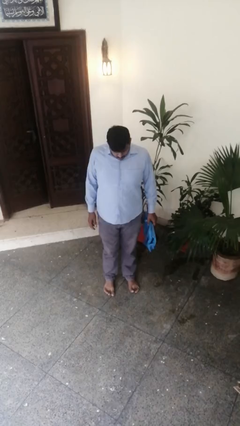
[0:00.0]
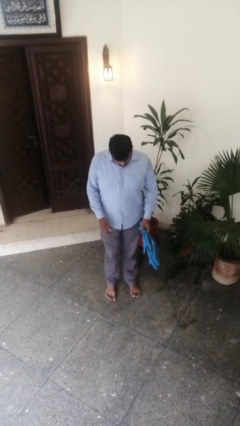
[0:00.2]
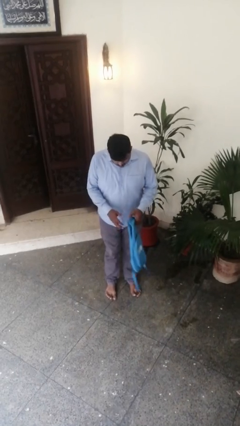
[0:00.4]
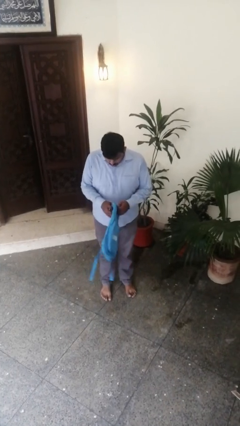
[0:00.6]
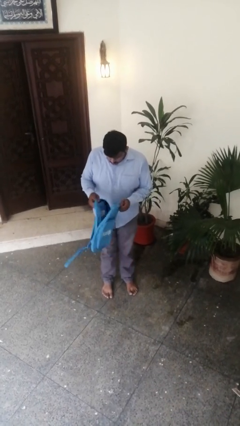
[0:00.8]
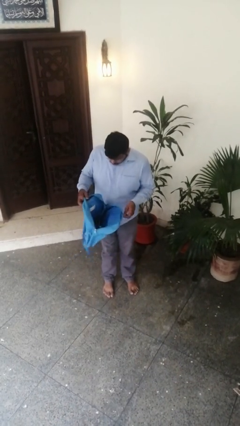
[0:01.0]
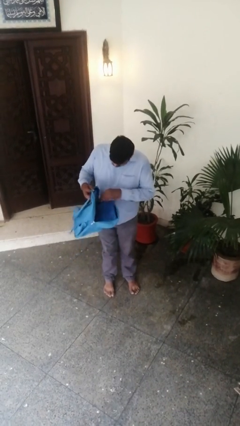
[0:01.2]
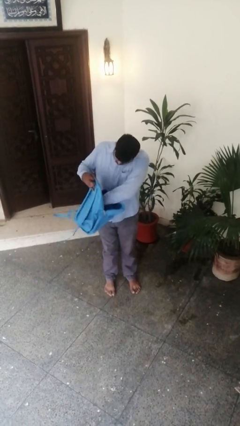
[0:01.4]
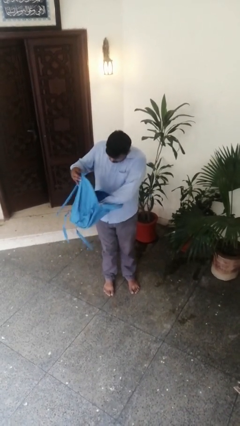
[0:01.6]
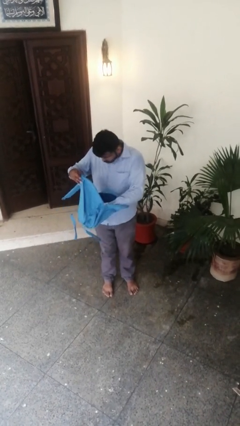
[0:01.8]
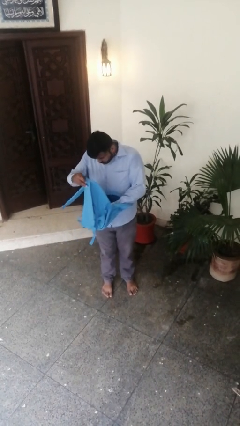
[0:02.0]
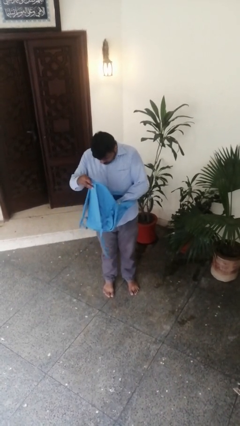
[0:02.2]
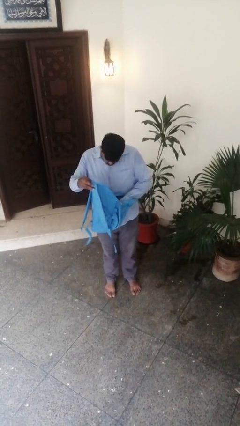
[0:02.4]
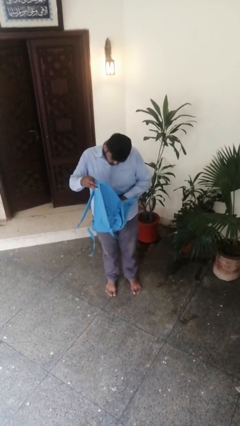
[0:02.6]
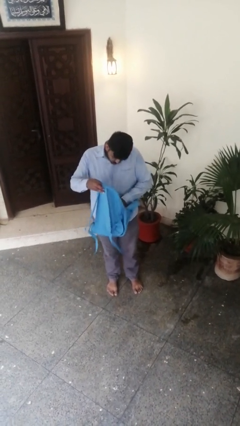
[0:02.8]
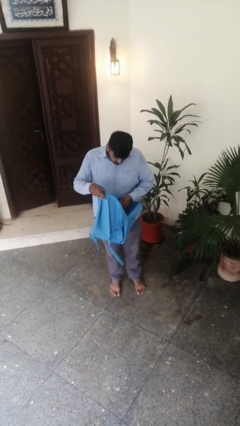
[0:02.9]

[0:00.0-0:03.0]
person searches in backpack

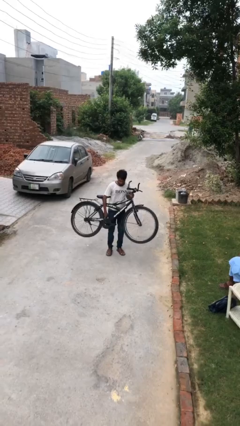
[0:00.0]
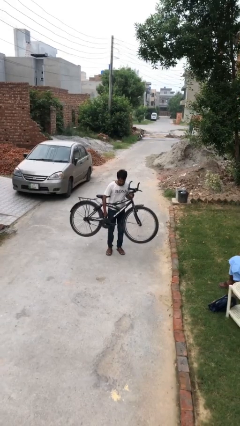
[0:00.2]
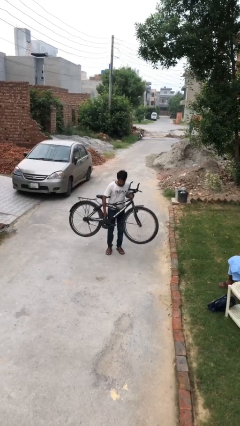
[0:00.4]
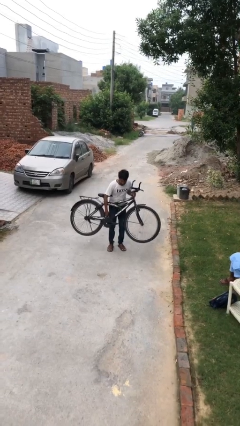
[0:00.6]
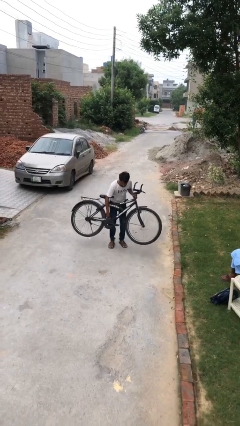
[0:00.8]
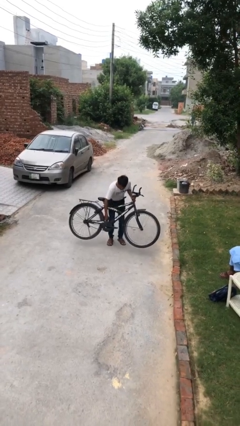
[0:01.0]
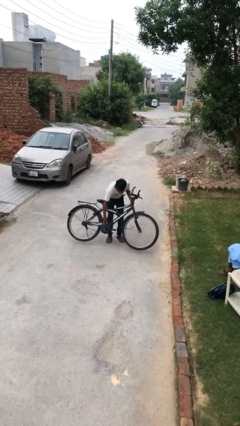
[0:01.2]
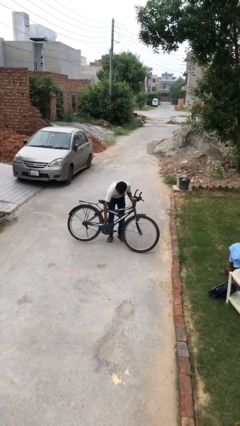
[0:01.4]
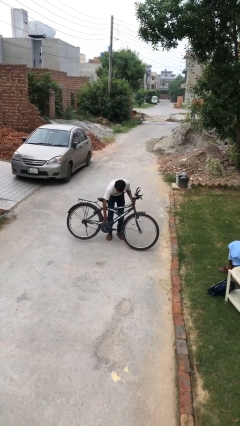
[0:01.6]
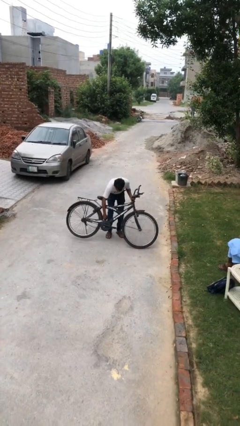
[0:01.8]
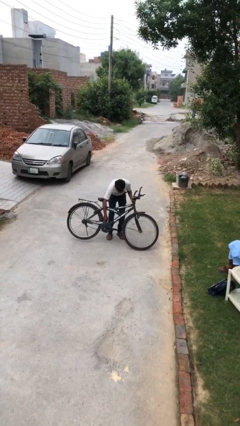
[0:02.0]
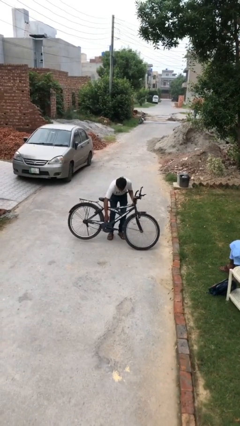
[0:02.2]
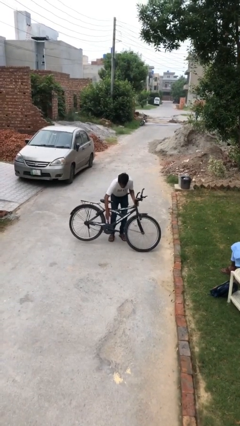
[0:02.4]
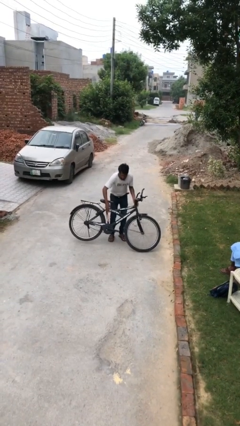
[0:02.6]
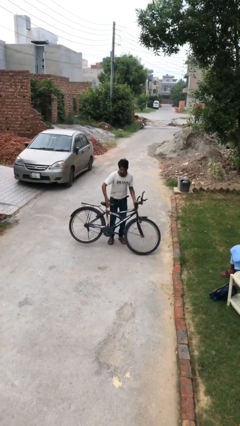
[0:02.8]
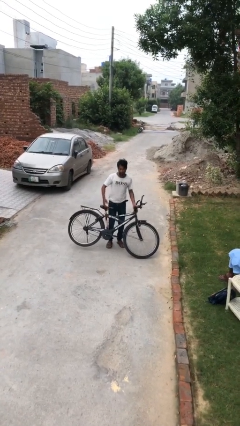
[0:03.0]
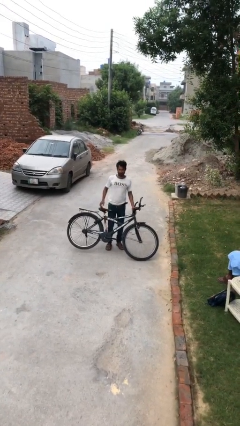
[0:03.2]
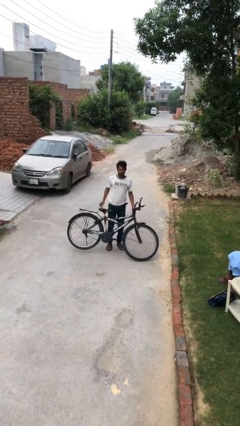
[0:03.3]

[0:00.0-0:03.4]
person puts down object on floor

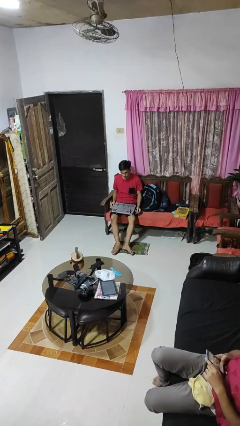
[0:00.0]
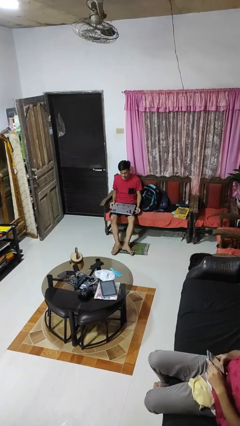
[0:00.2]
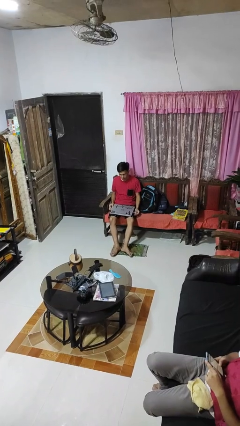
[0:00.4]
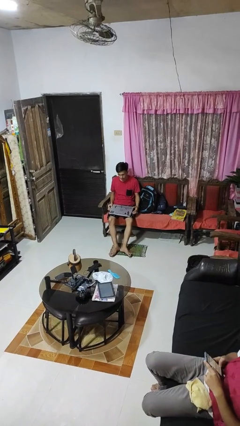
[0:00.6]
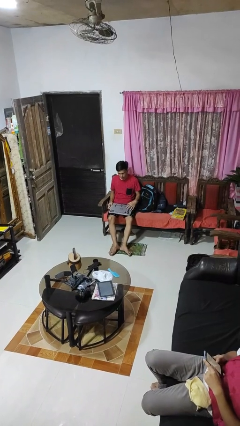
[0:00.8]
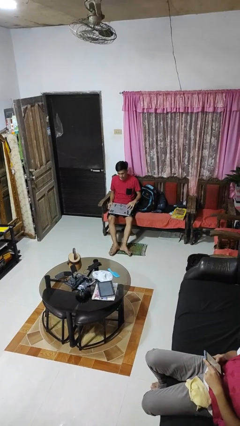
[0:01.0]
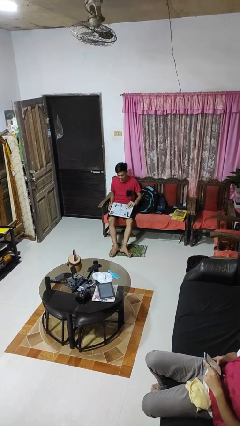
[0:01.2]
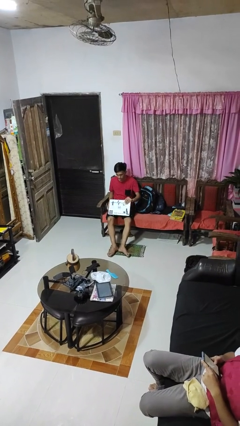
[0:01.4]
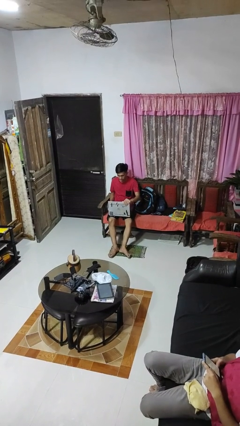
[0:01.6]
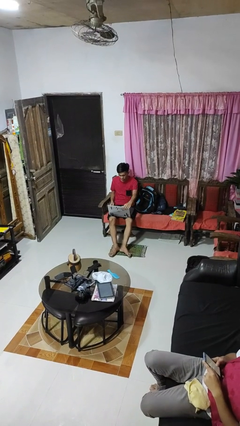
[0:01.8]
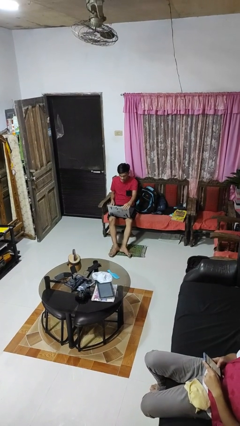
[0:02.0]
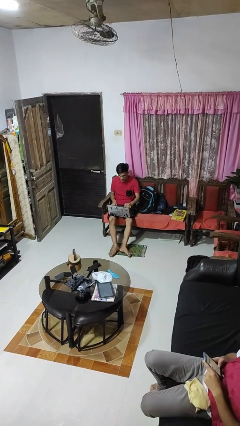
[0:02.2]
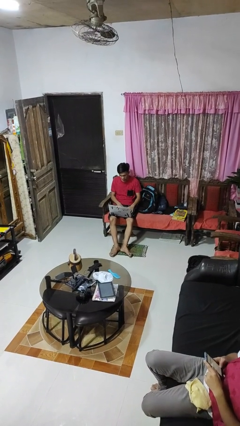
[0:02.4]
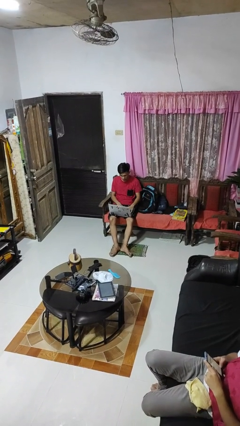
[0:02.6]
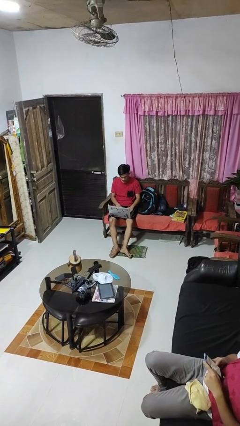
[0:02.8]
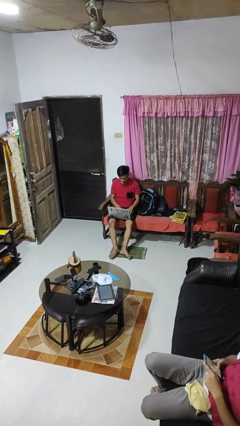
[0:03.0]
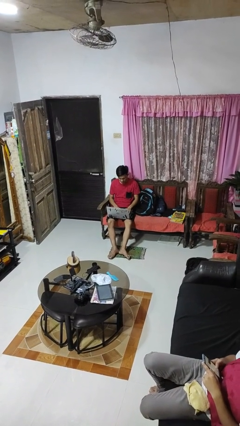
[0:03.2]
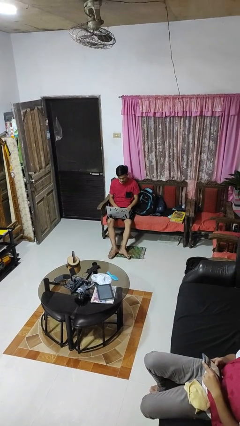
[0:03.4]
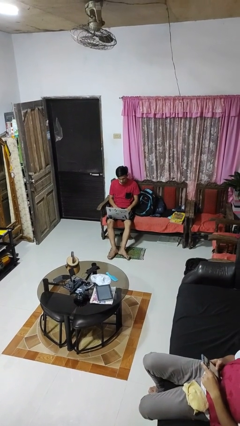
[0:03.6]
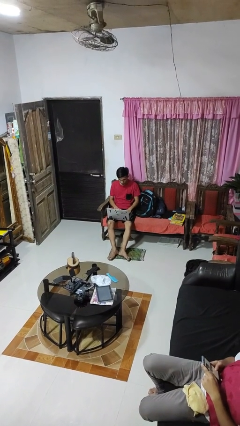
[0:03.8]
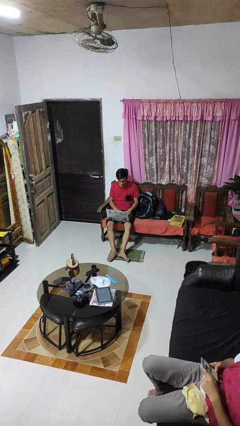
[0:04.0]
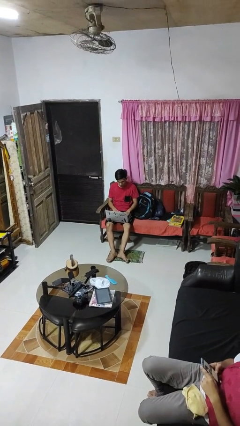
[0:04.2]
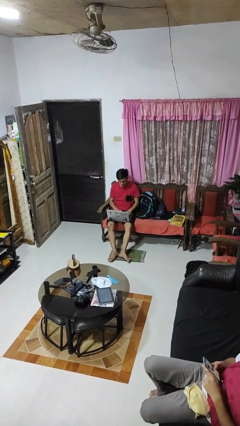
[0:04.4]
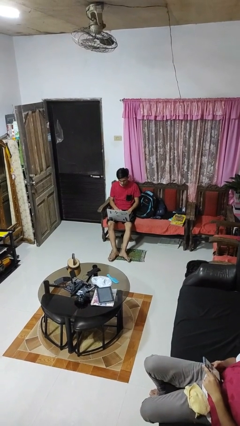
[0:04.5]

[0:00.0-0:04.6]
person opens laptop

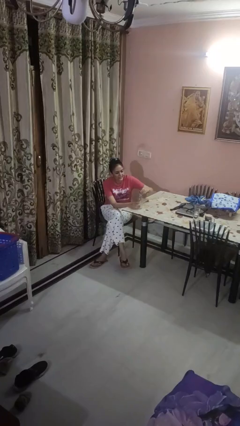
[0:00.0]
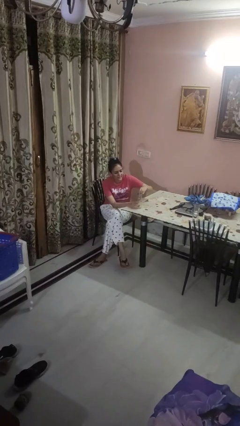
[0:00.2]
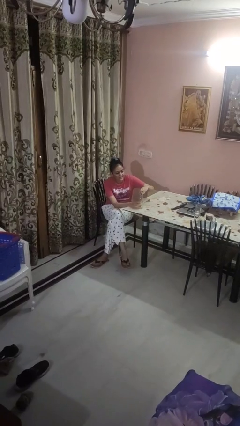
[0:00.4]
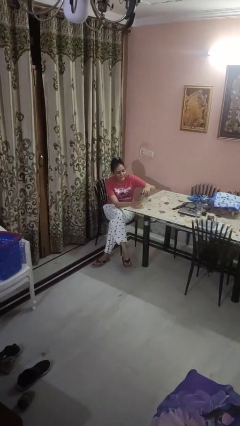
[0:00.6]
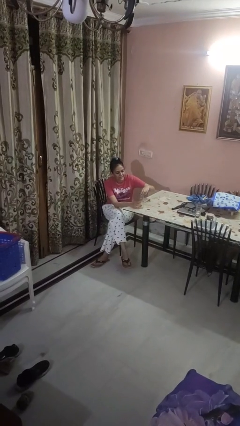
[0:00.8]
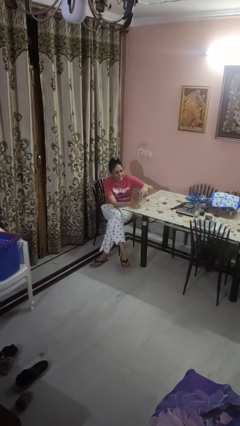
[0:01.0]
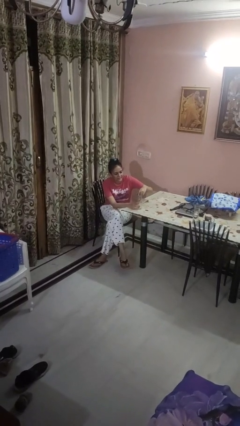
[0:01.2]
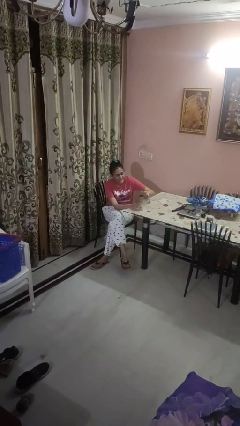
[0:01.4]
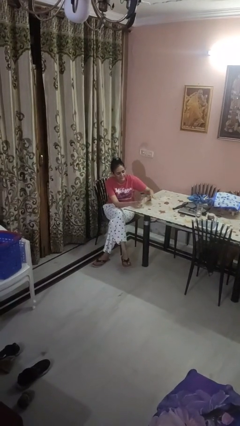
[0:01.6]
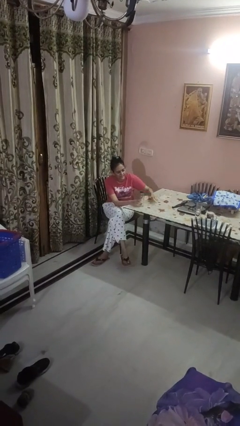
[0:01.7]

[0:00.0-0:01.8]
person screws lid to bottle

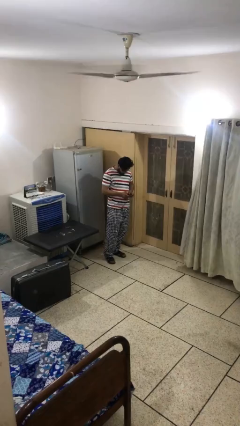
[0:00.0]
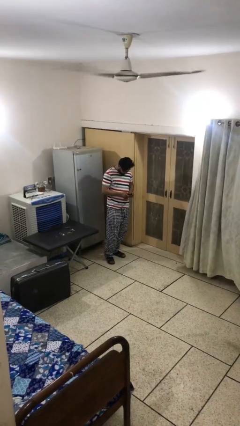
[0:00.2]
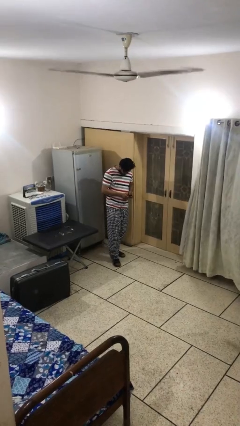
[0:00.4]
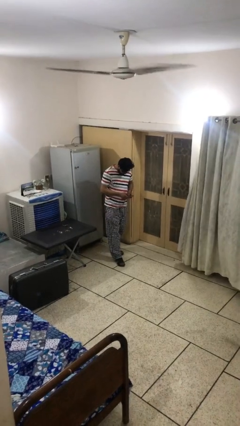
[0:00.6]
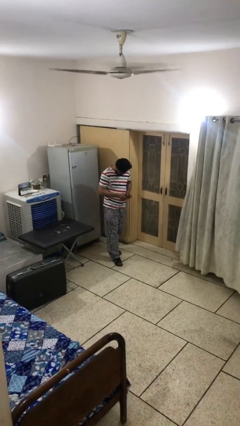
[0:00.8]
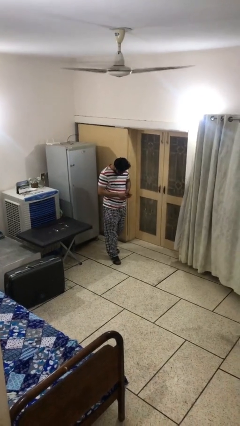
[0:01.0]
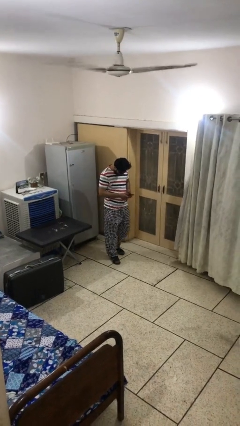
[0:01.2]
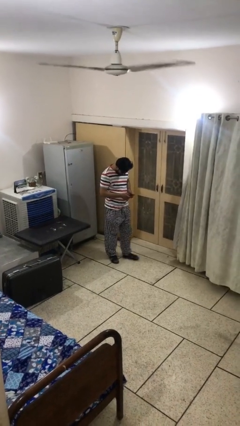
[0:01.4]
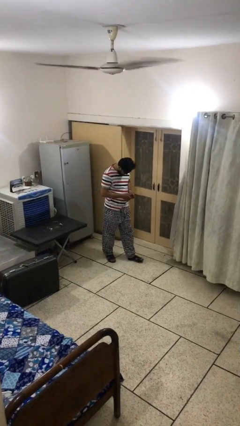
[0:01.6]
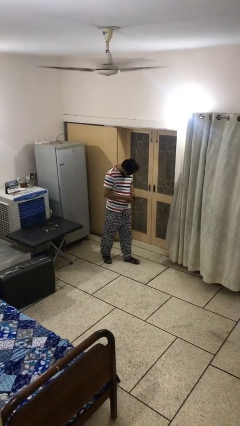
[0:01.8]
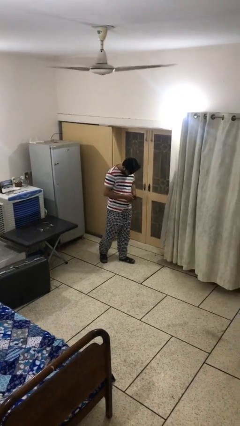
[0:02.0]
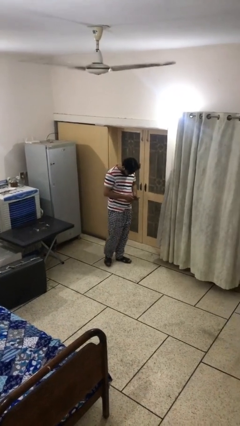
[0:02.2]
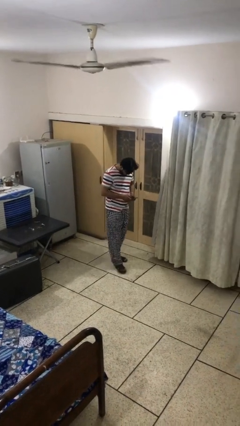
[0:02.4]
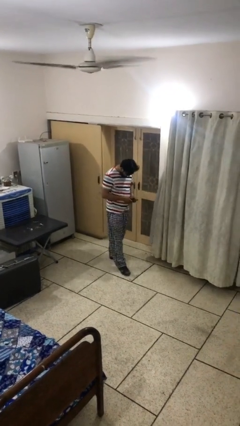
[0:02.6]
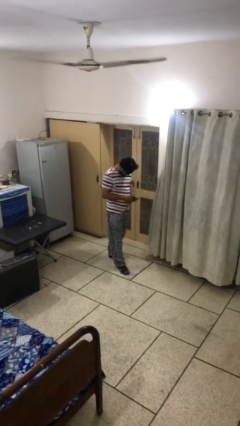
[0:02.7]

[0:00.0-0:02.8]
person texts on phone

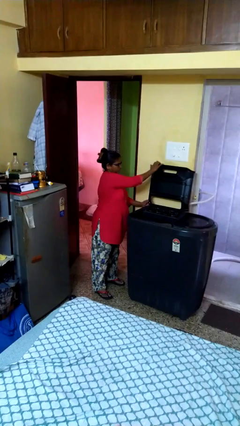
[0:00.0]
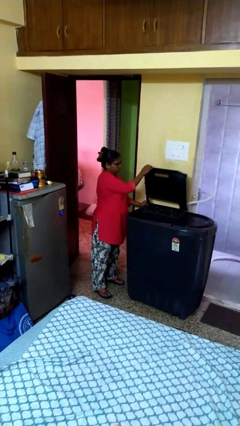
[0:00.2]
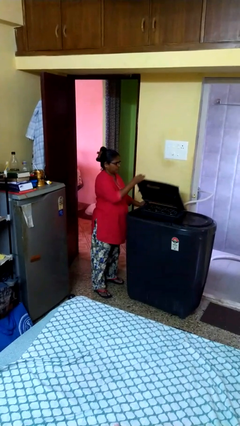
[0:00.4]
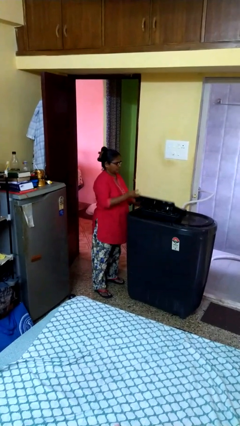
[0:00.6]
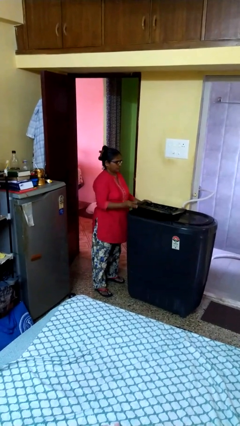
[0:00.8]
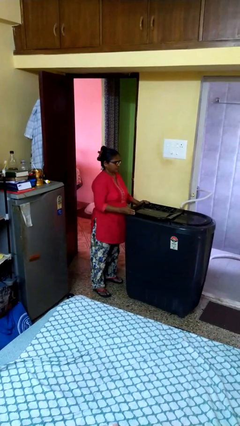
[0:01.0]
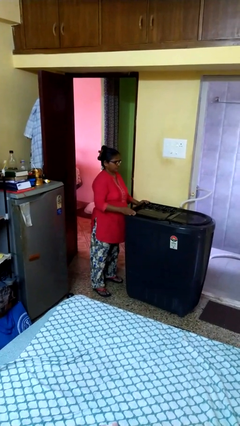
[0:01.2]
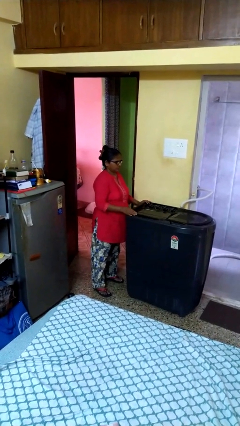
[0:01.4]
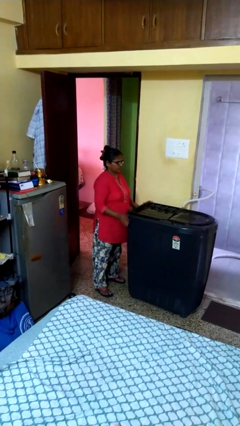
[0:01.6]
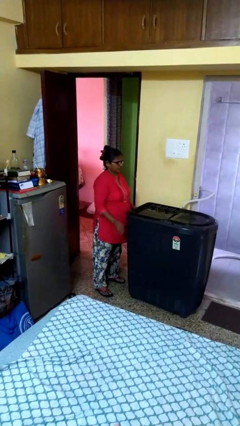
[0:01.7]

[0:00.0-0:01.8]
person closes clothes washer
